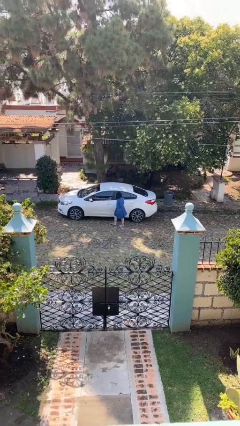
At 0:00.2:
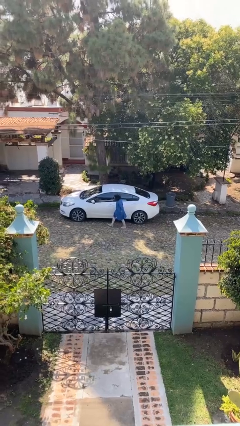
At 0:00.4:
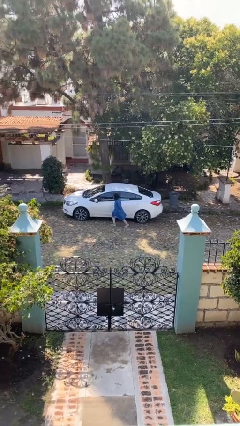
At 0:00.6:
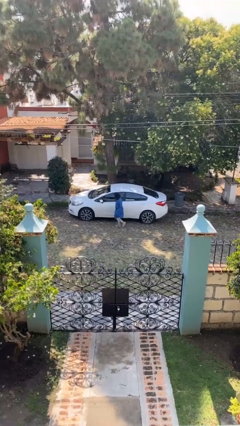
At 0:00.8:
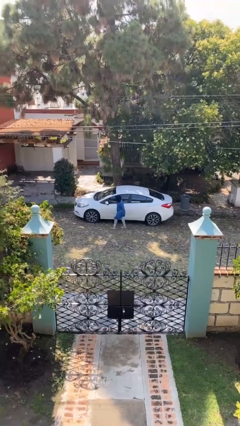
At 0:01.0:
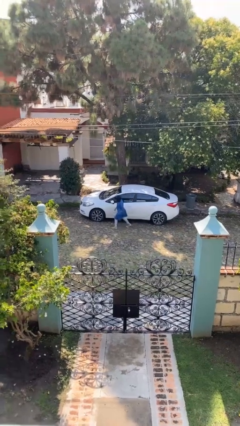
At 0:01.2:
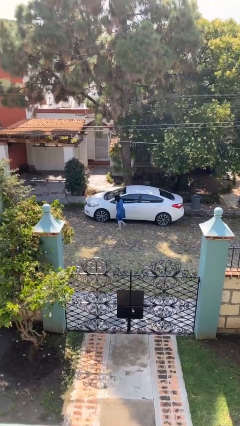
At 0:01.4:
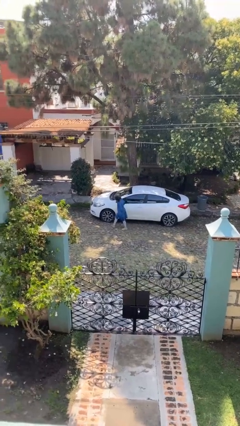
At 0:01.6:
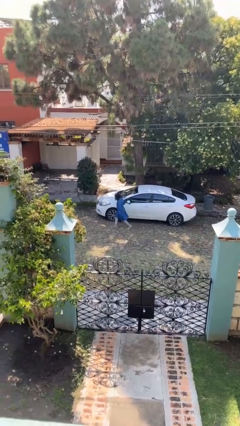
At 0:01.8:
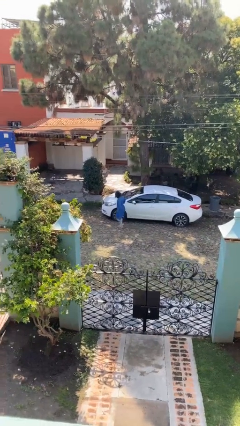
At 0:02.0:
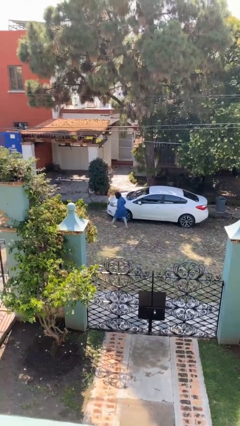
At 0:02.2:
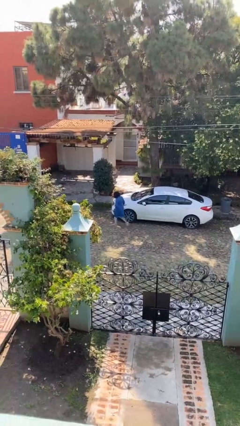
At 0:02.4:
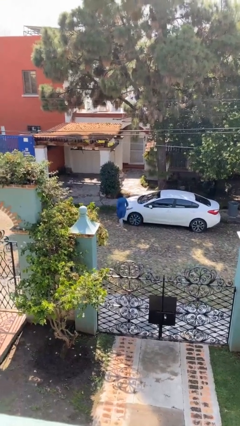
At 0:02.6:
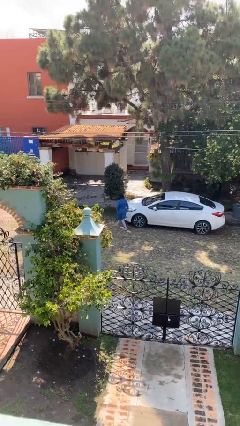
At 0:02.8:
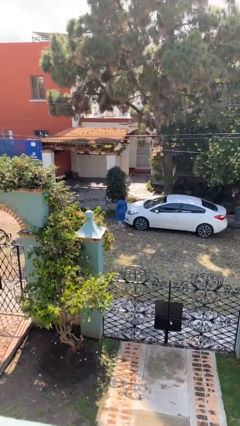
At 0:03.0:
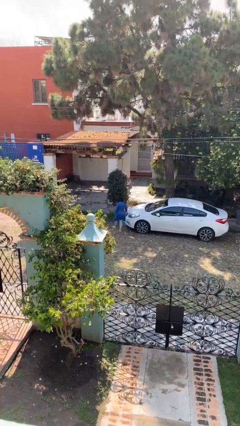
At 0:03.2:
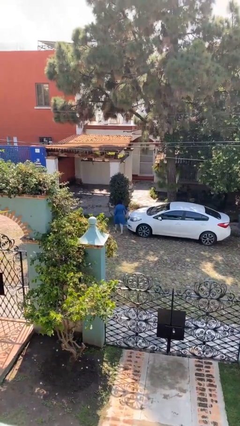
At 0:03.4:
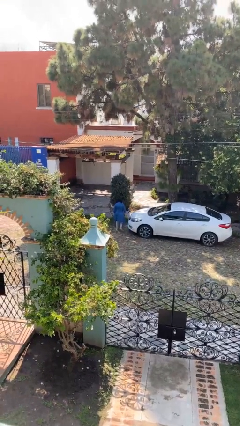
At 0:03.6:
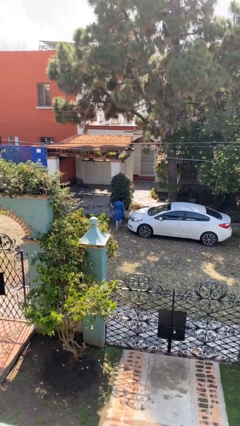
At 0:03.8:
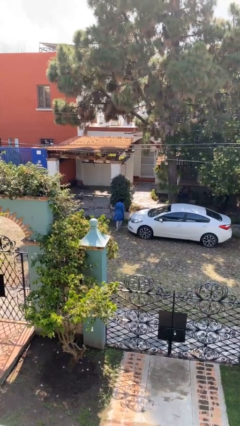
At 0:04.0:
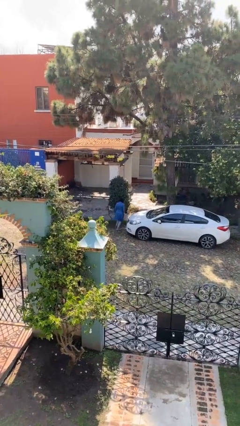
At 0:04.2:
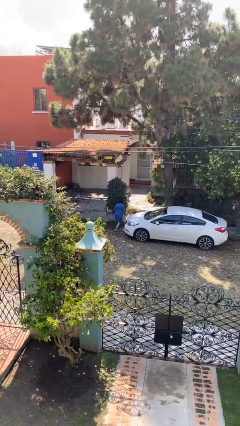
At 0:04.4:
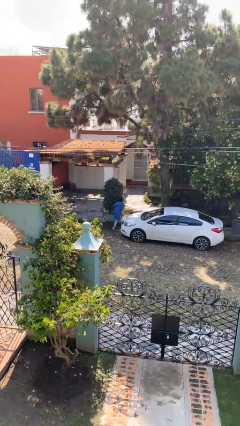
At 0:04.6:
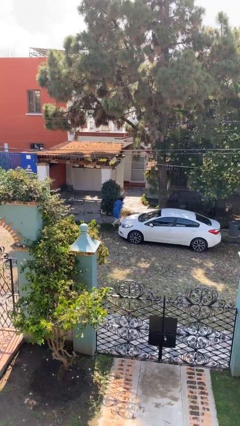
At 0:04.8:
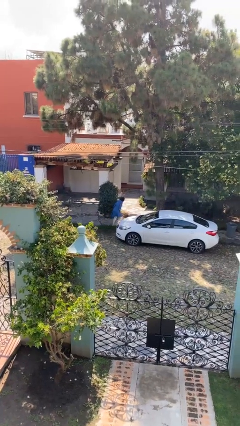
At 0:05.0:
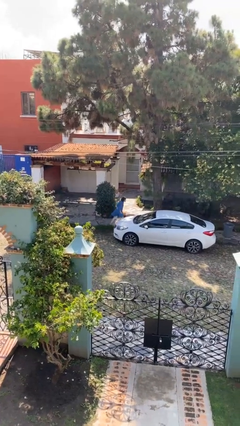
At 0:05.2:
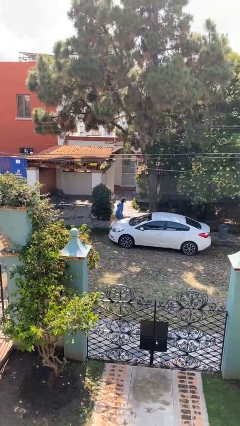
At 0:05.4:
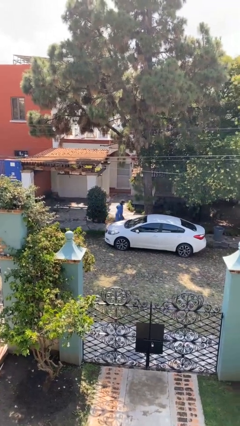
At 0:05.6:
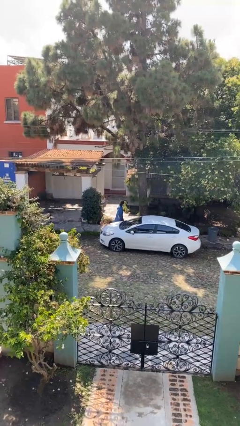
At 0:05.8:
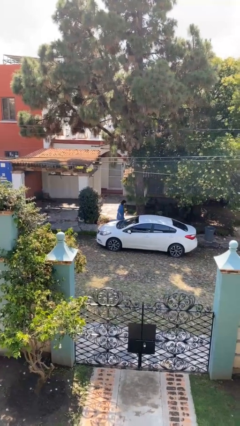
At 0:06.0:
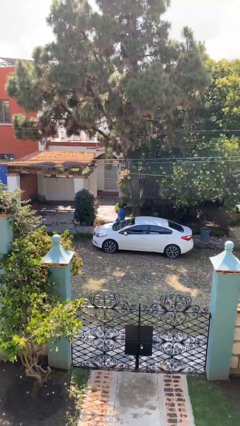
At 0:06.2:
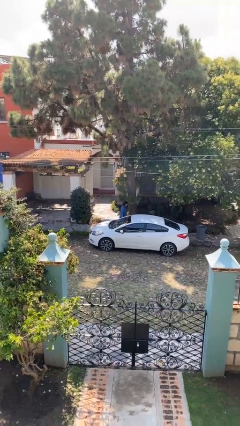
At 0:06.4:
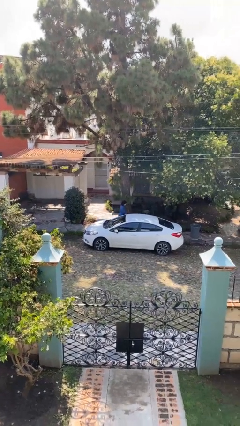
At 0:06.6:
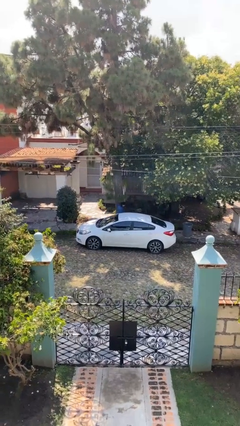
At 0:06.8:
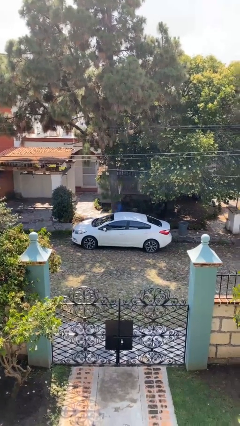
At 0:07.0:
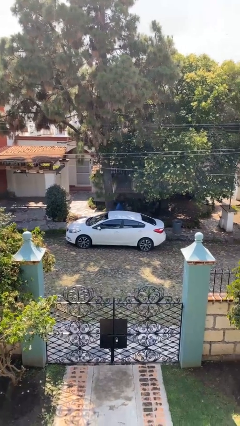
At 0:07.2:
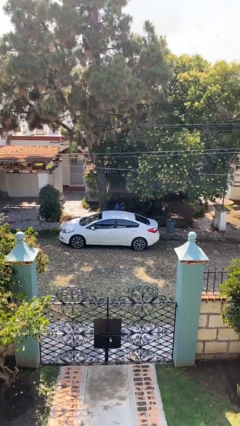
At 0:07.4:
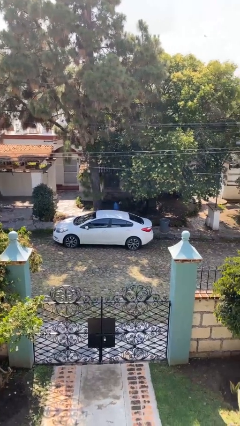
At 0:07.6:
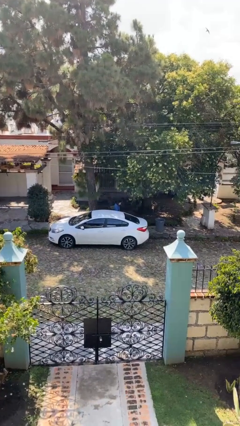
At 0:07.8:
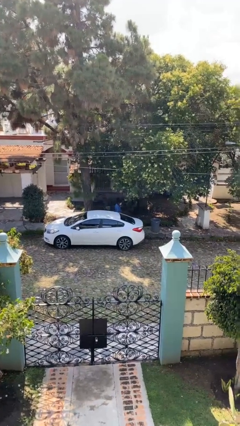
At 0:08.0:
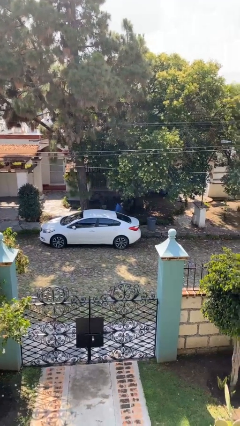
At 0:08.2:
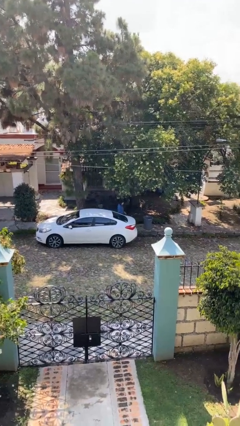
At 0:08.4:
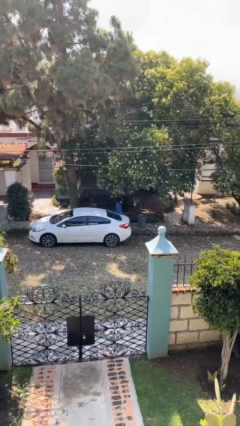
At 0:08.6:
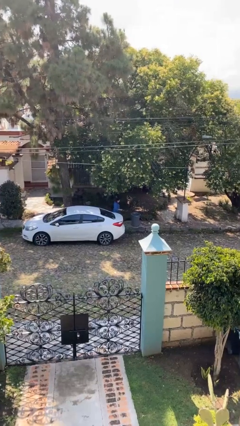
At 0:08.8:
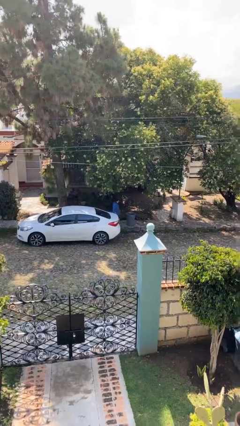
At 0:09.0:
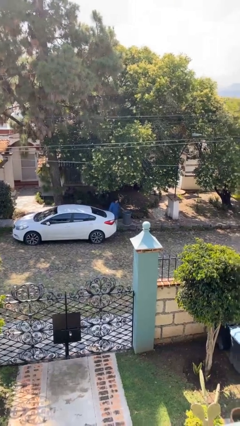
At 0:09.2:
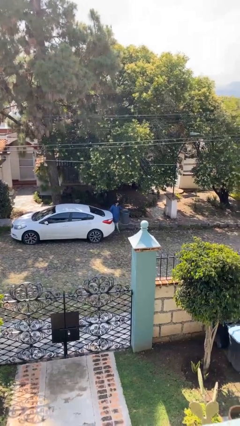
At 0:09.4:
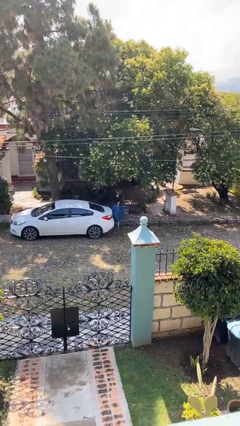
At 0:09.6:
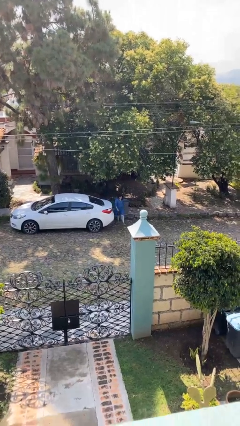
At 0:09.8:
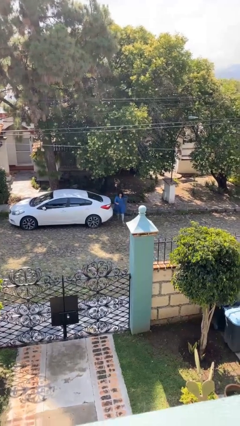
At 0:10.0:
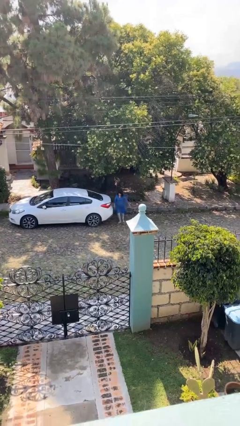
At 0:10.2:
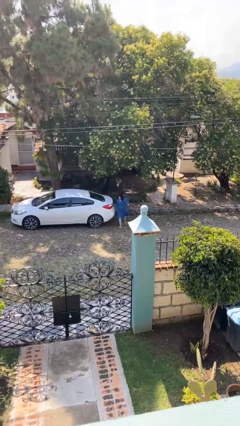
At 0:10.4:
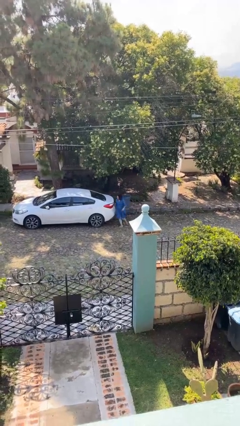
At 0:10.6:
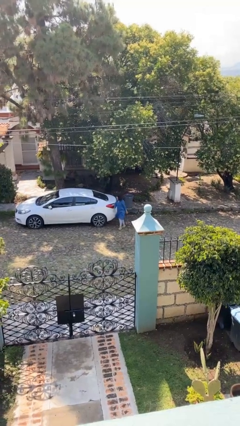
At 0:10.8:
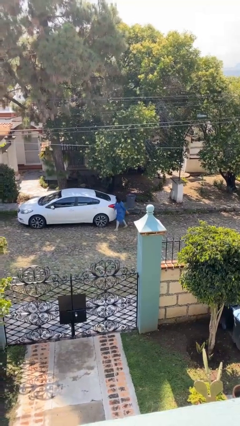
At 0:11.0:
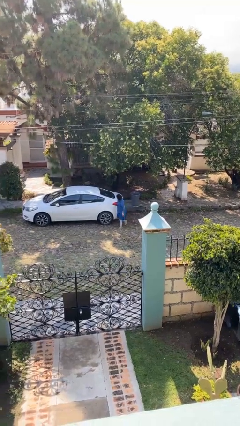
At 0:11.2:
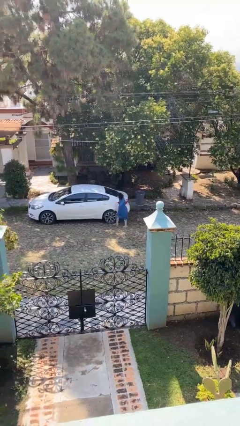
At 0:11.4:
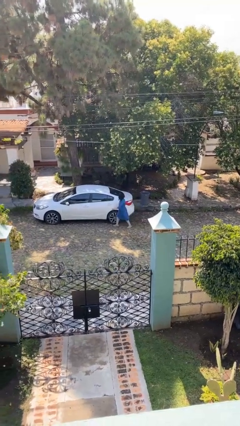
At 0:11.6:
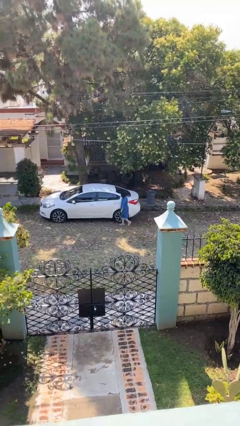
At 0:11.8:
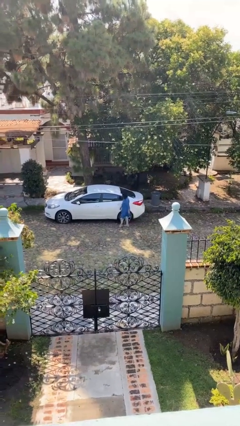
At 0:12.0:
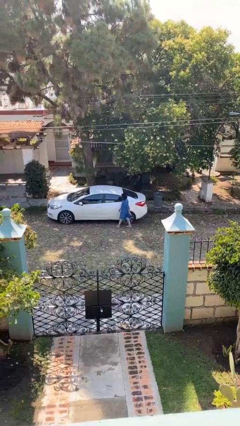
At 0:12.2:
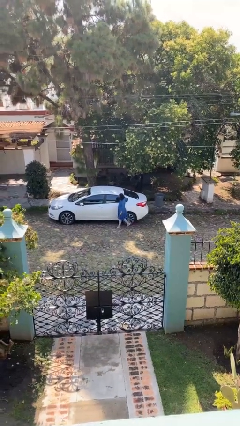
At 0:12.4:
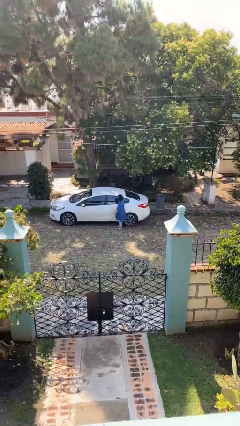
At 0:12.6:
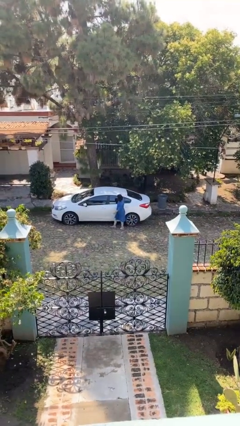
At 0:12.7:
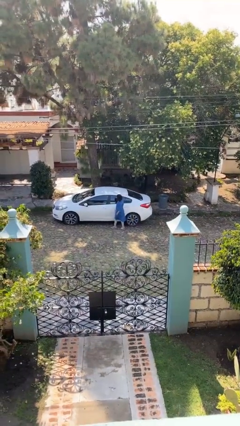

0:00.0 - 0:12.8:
person walks around car

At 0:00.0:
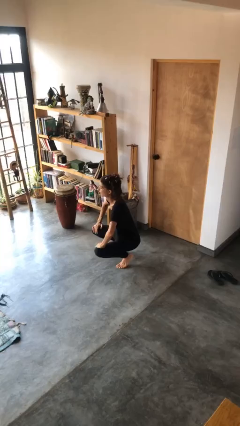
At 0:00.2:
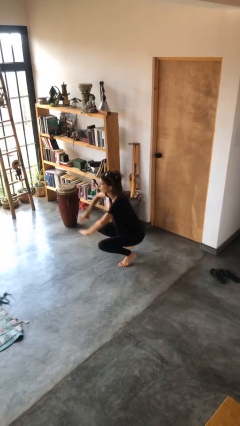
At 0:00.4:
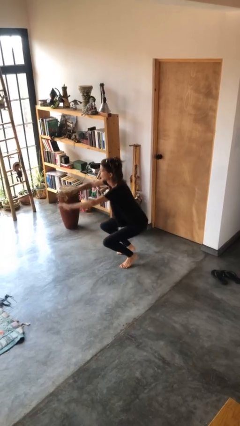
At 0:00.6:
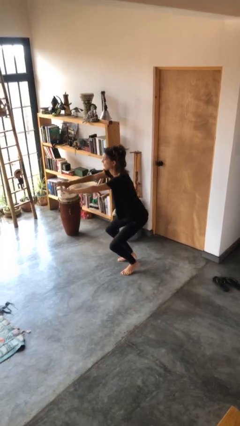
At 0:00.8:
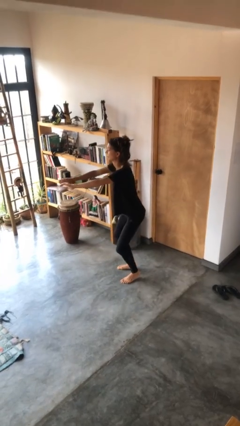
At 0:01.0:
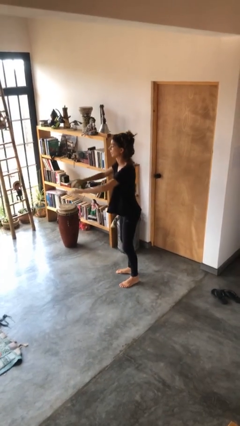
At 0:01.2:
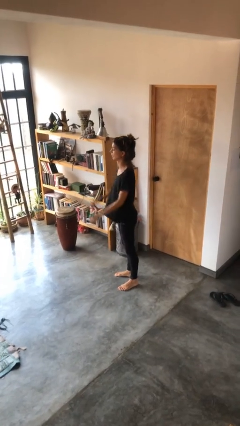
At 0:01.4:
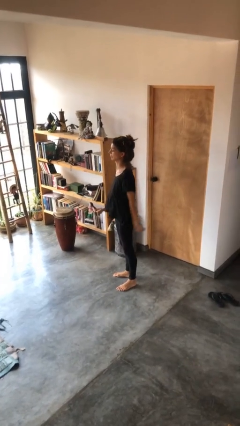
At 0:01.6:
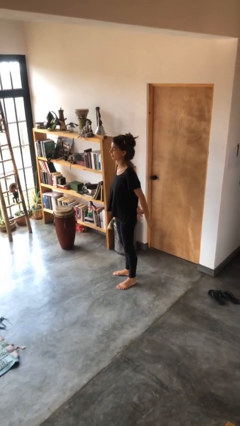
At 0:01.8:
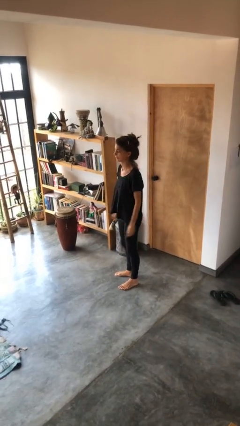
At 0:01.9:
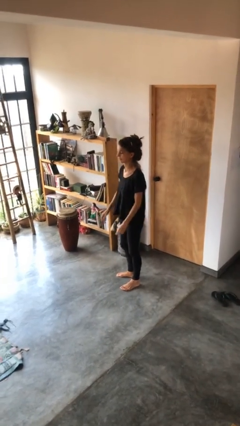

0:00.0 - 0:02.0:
person stands up

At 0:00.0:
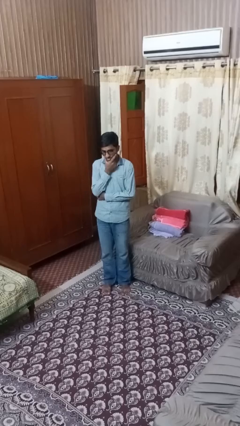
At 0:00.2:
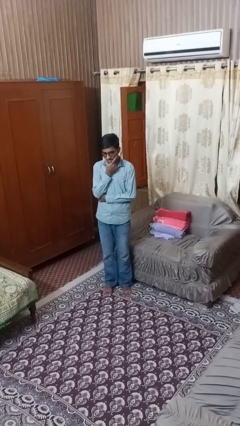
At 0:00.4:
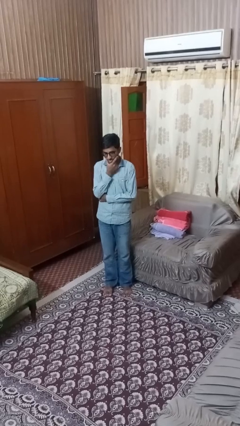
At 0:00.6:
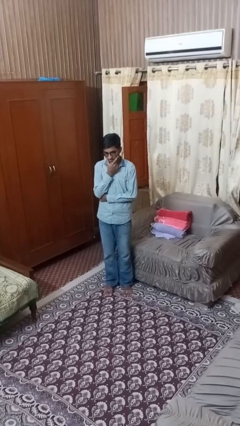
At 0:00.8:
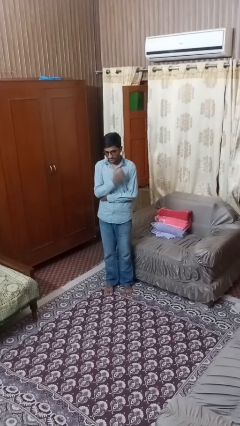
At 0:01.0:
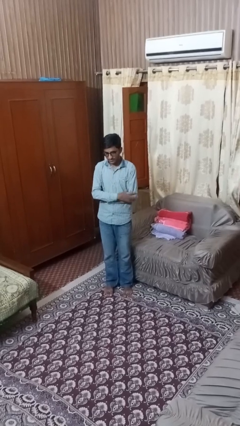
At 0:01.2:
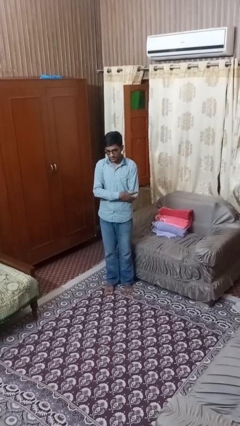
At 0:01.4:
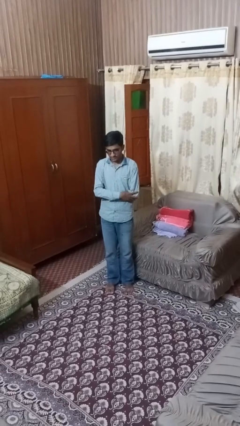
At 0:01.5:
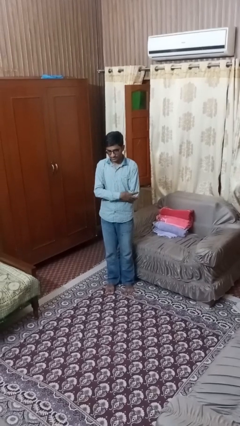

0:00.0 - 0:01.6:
person strokes chin

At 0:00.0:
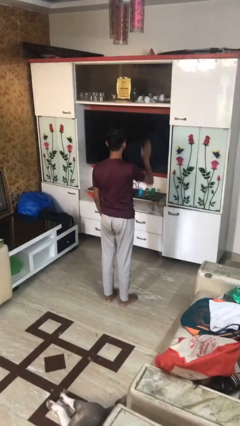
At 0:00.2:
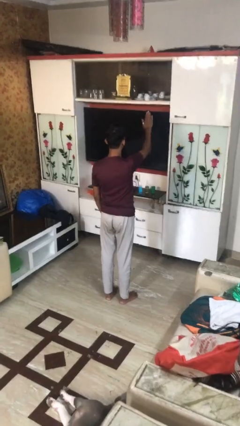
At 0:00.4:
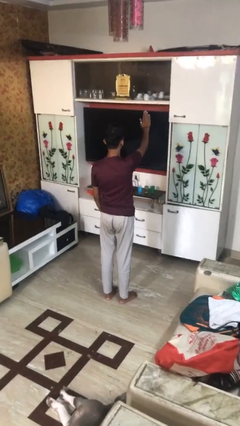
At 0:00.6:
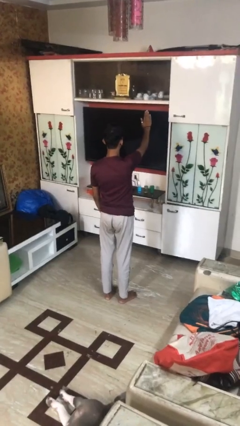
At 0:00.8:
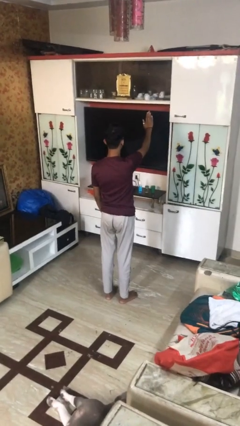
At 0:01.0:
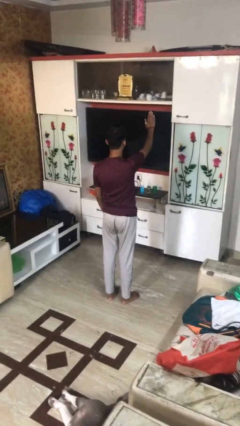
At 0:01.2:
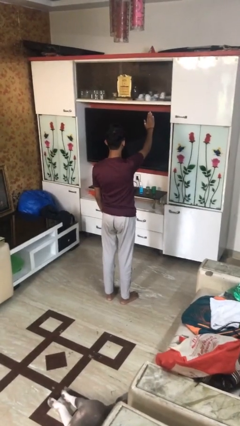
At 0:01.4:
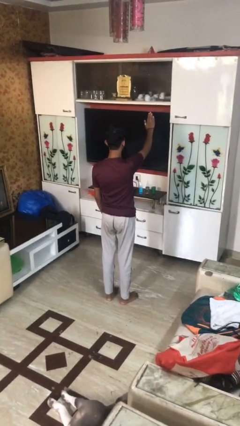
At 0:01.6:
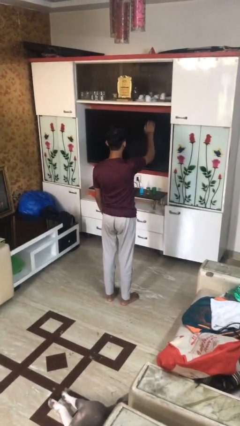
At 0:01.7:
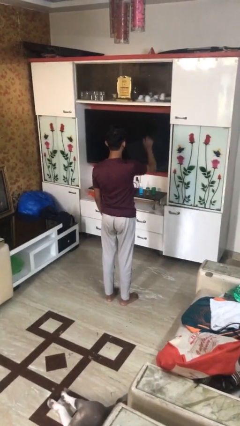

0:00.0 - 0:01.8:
person gestures stop
